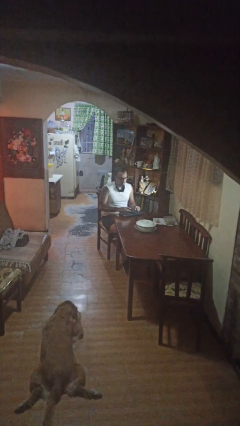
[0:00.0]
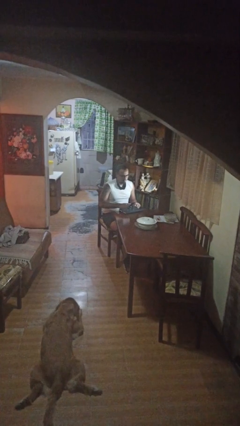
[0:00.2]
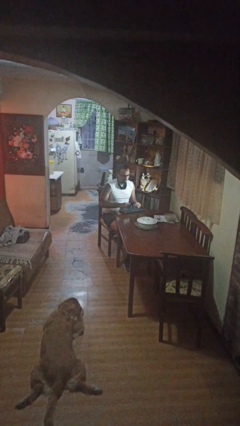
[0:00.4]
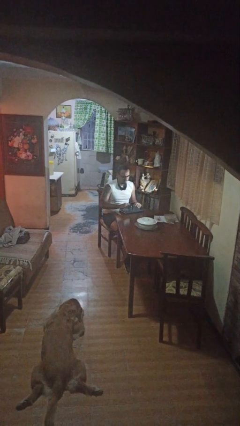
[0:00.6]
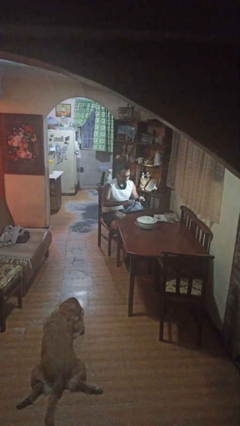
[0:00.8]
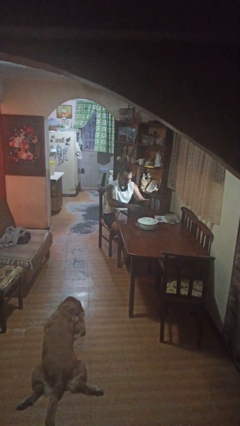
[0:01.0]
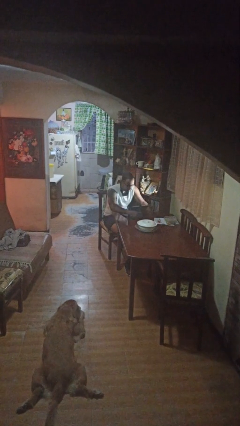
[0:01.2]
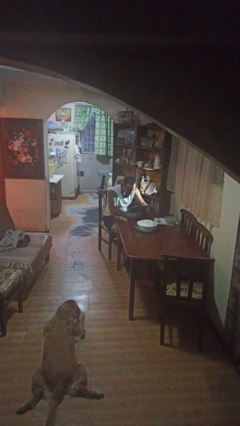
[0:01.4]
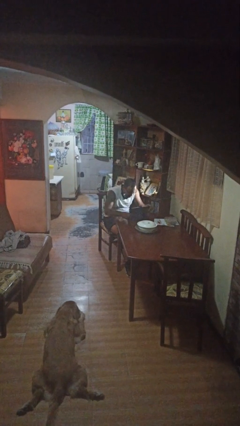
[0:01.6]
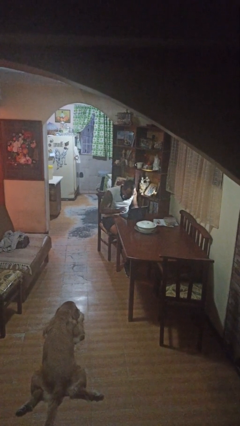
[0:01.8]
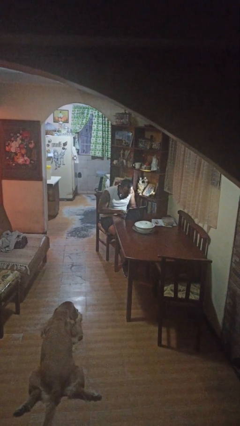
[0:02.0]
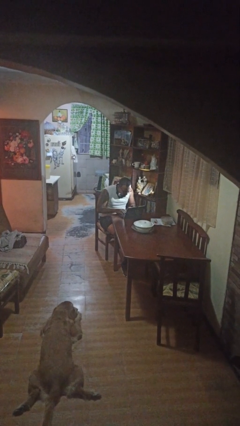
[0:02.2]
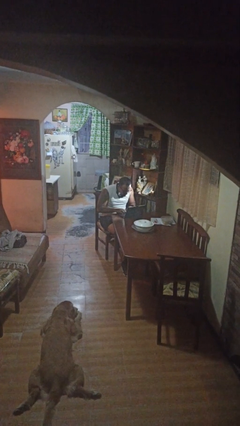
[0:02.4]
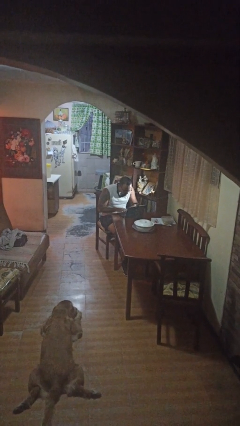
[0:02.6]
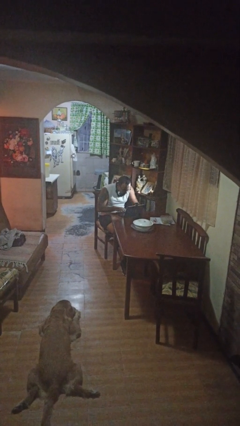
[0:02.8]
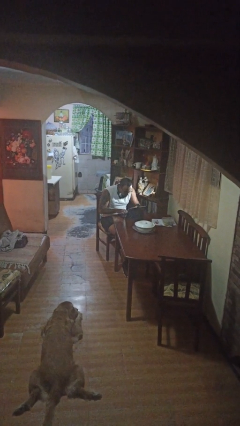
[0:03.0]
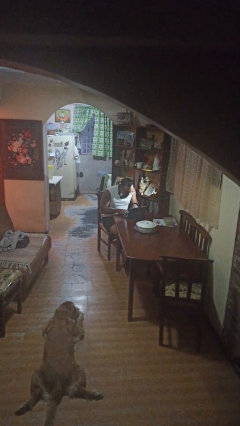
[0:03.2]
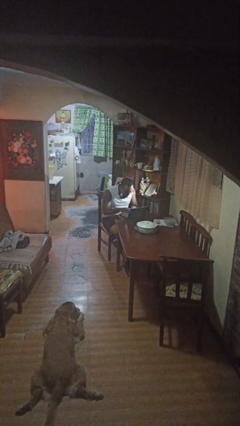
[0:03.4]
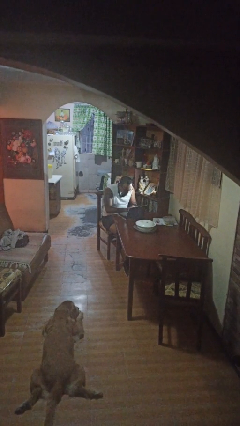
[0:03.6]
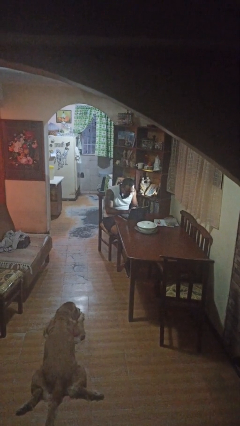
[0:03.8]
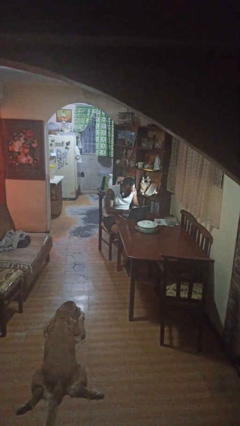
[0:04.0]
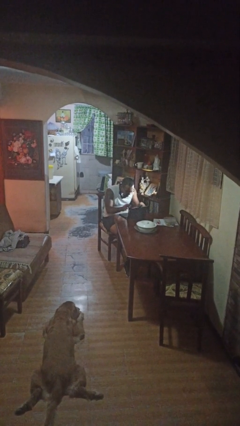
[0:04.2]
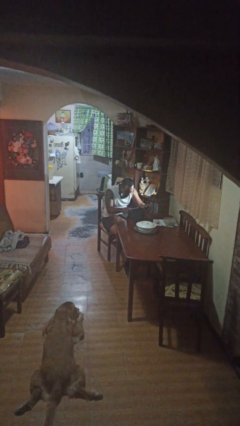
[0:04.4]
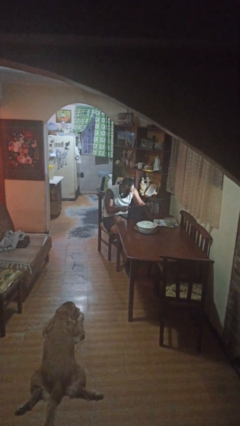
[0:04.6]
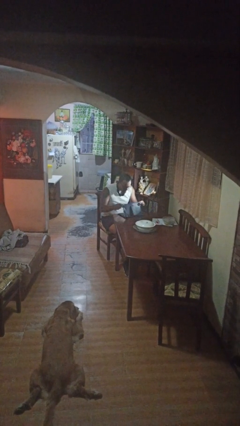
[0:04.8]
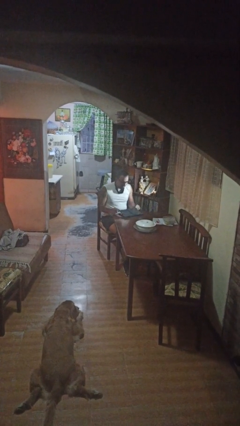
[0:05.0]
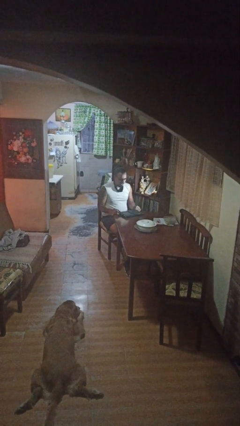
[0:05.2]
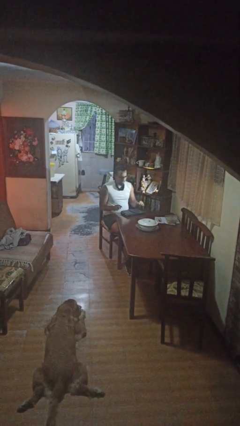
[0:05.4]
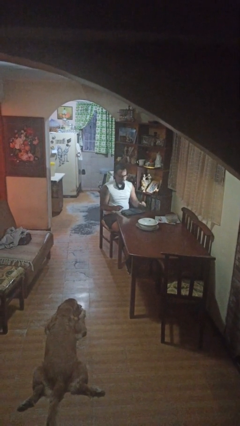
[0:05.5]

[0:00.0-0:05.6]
person interacts with laptop

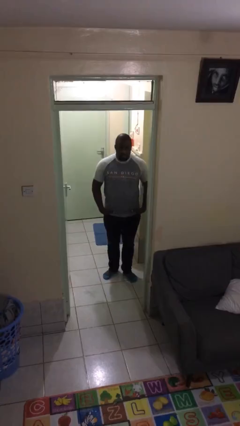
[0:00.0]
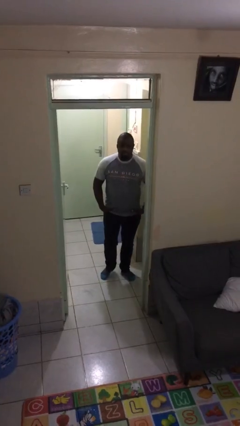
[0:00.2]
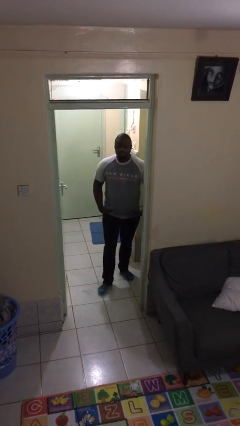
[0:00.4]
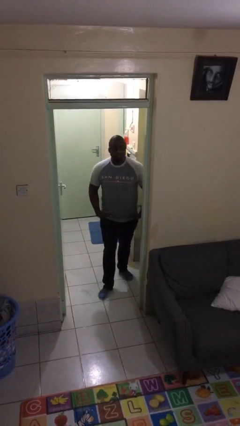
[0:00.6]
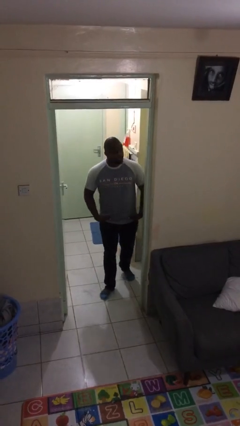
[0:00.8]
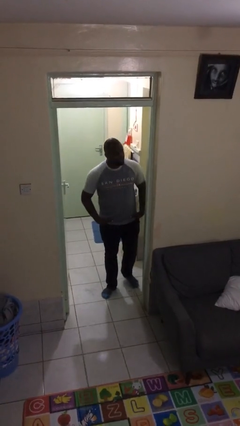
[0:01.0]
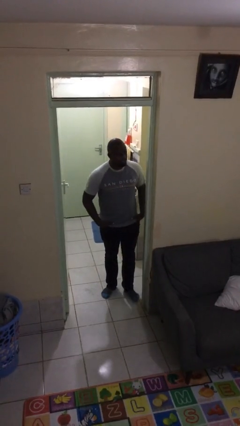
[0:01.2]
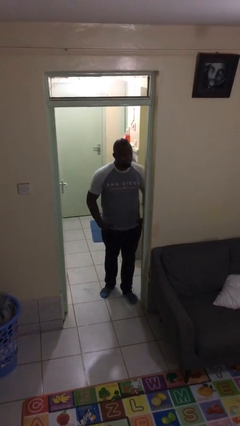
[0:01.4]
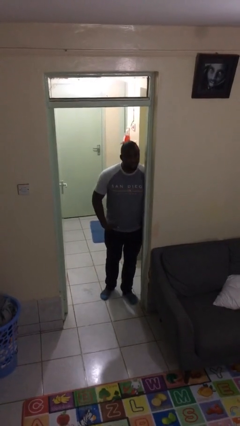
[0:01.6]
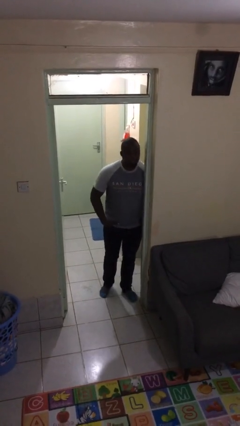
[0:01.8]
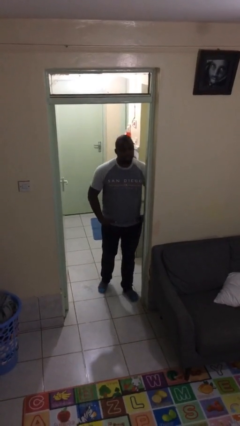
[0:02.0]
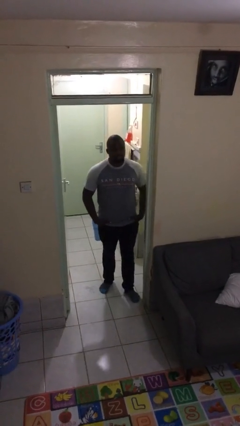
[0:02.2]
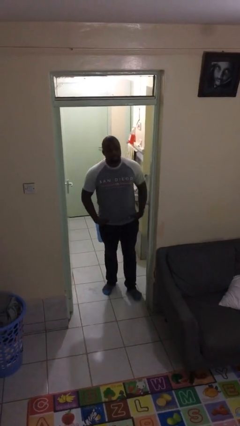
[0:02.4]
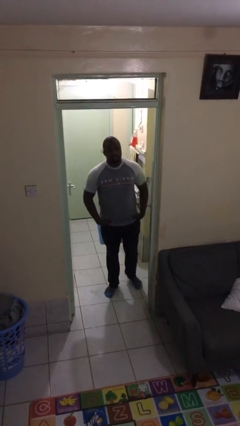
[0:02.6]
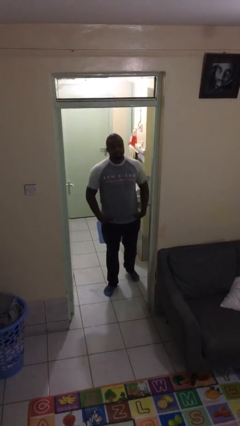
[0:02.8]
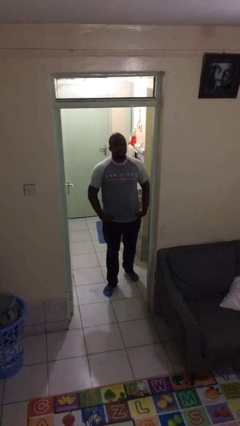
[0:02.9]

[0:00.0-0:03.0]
person bumps into wall

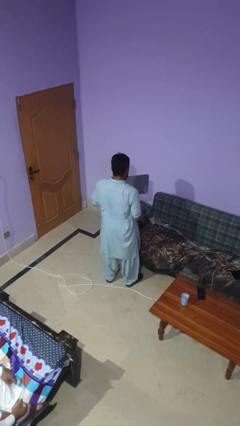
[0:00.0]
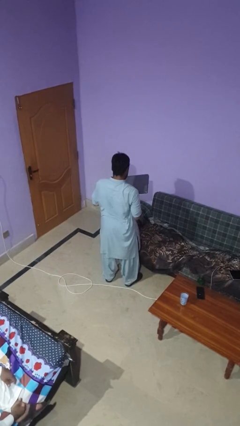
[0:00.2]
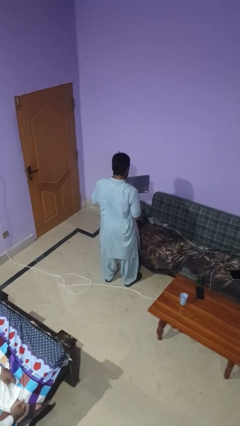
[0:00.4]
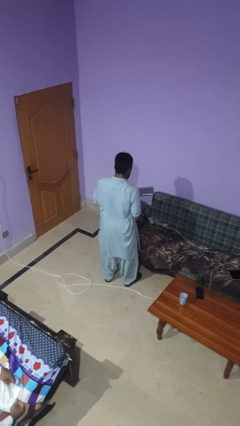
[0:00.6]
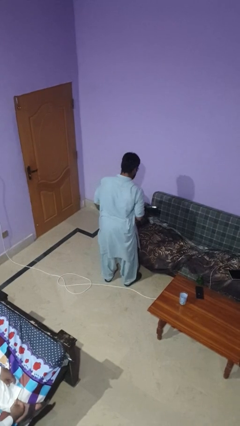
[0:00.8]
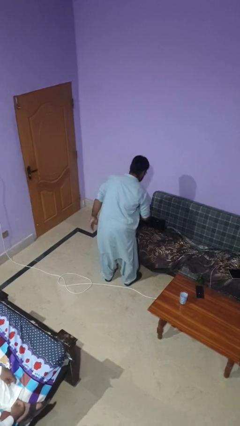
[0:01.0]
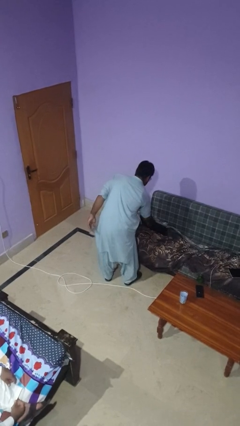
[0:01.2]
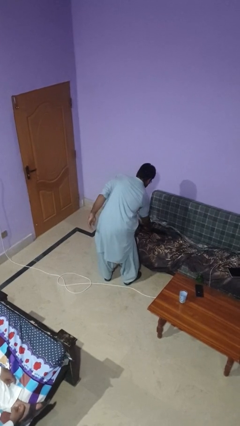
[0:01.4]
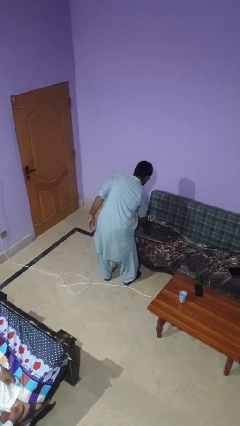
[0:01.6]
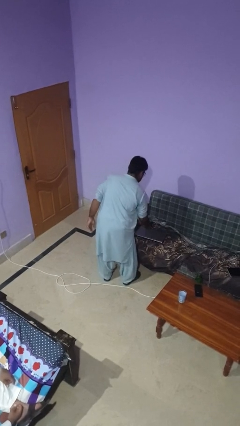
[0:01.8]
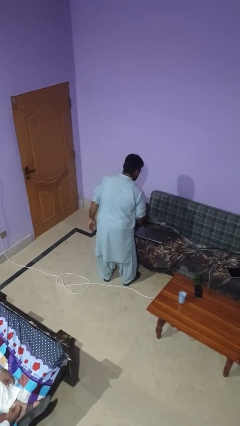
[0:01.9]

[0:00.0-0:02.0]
person puts down object on couch

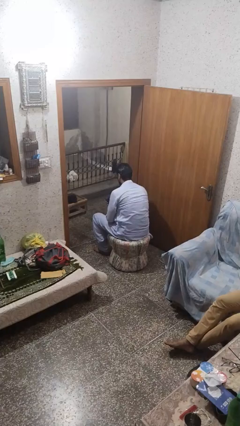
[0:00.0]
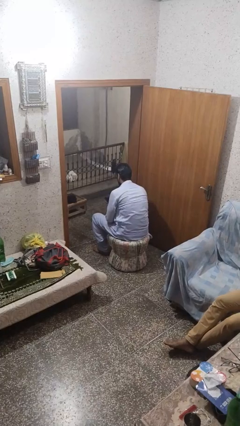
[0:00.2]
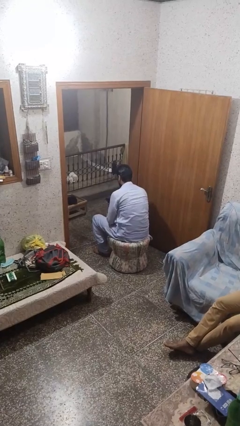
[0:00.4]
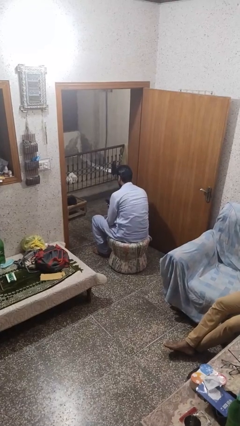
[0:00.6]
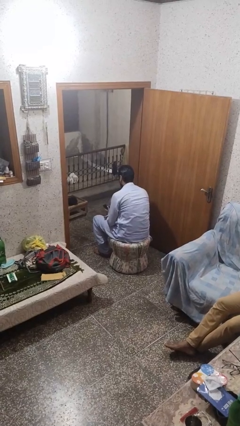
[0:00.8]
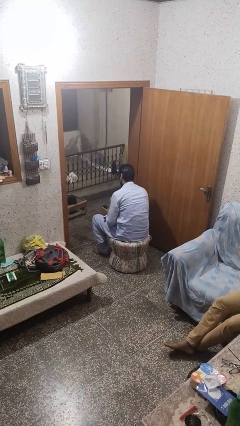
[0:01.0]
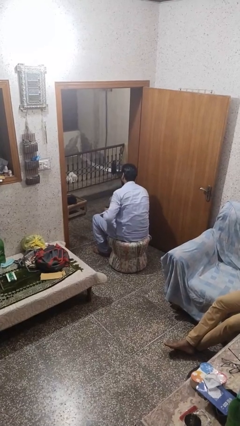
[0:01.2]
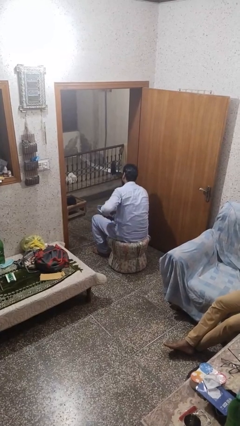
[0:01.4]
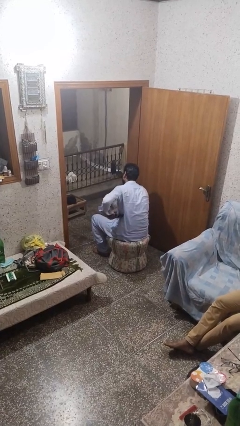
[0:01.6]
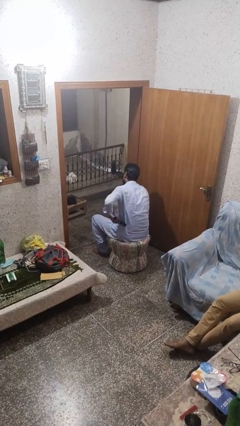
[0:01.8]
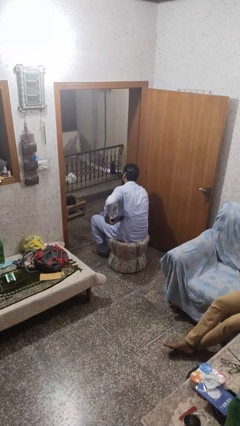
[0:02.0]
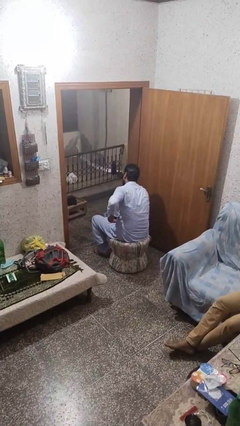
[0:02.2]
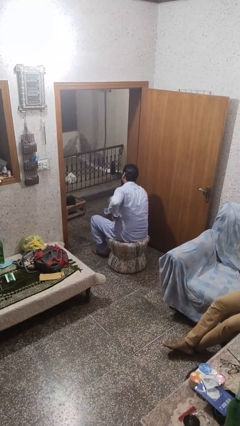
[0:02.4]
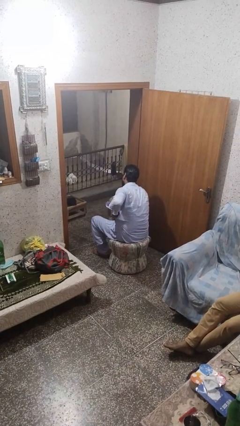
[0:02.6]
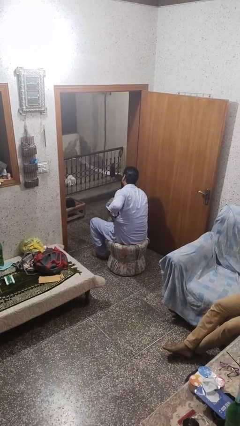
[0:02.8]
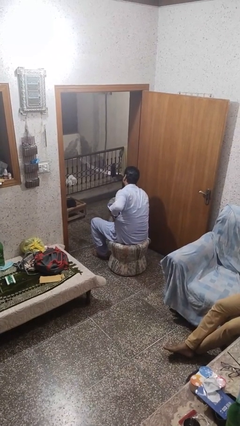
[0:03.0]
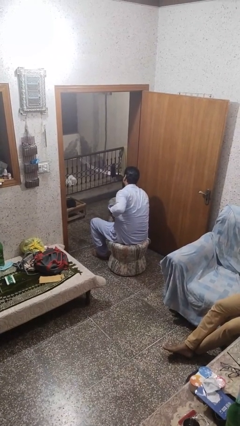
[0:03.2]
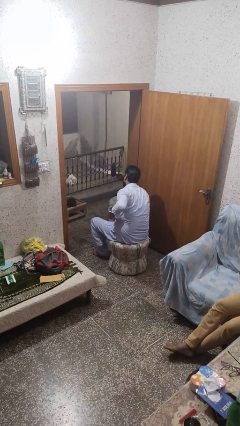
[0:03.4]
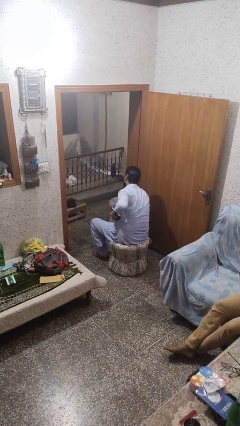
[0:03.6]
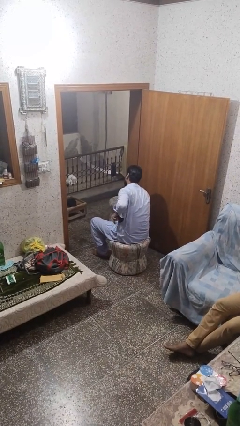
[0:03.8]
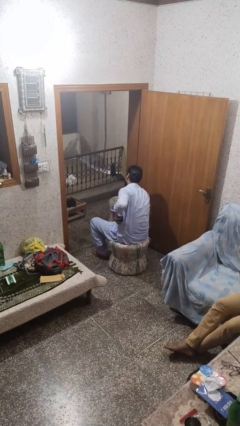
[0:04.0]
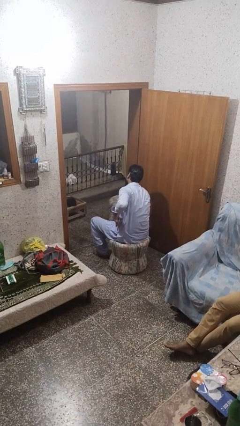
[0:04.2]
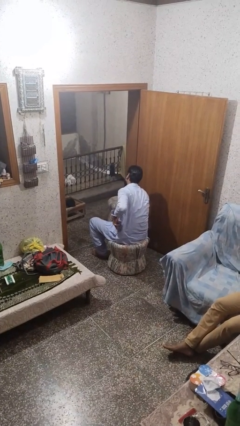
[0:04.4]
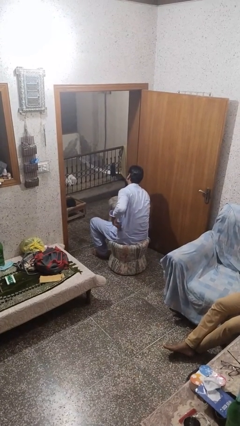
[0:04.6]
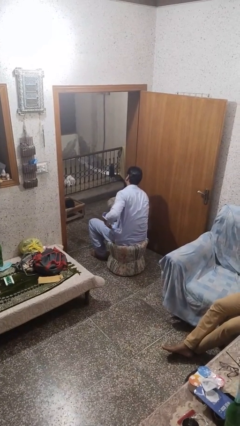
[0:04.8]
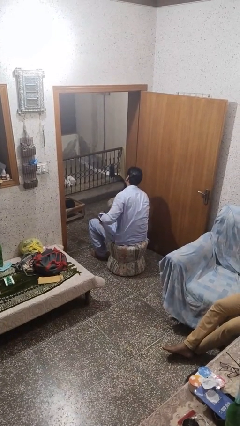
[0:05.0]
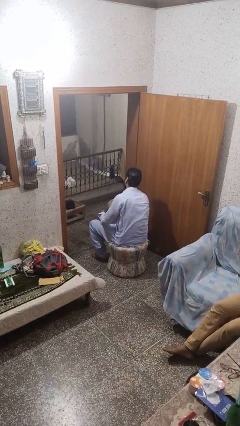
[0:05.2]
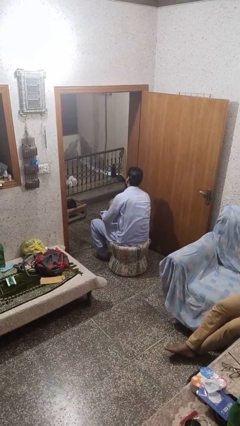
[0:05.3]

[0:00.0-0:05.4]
person puts phone into pocket

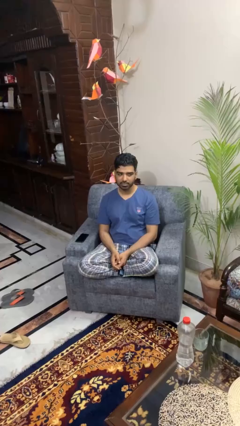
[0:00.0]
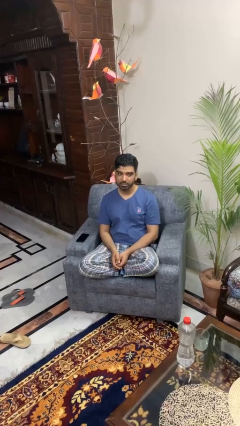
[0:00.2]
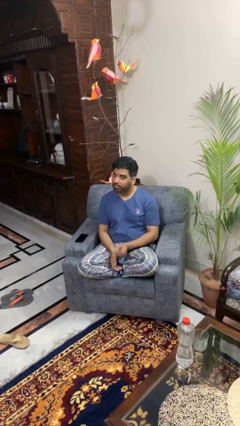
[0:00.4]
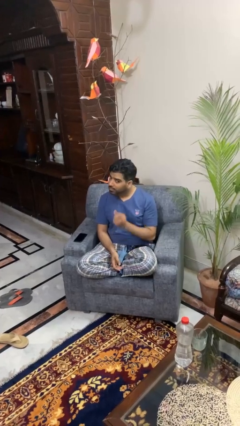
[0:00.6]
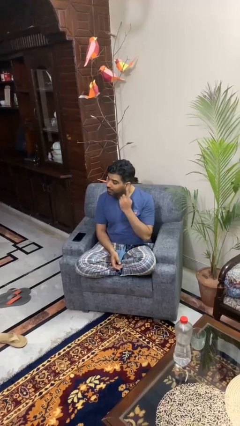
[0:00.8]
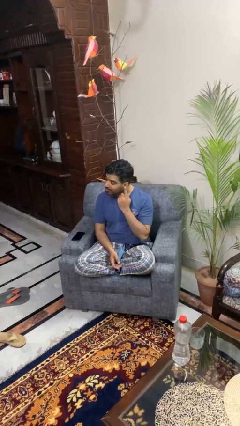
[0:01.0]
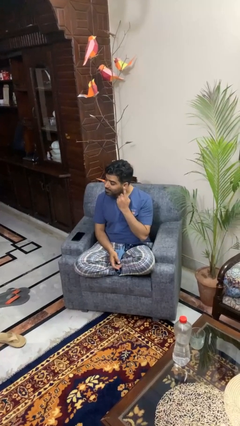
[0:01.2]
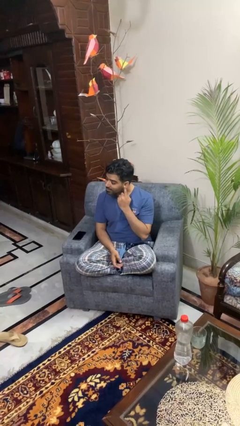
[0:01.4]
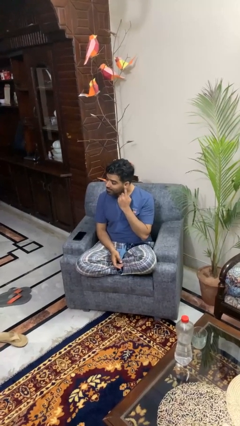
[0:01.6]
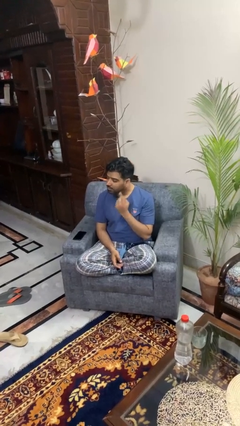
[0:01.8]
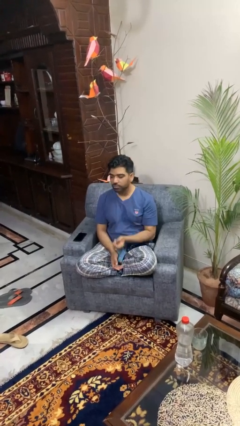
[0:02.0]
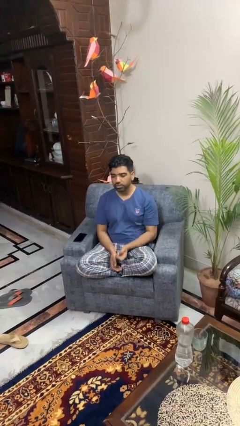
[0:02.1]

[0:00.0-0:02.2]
person gestures listen closely
